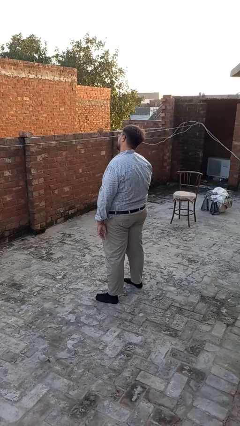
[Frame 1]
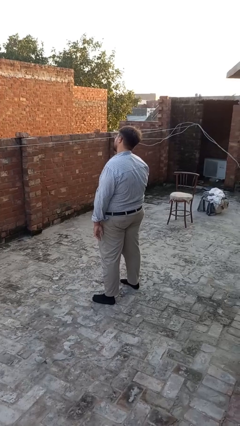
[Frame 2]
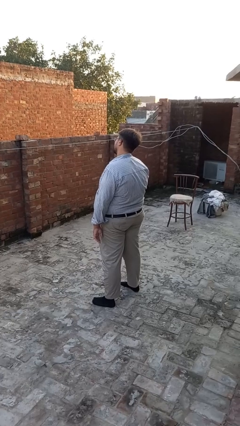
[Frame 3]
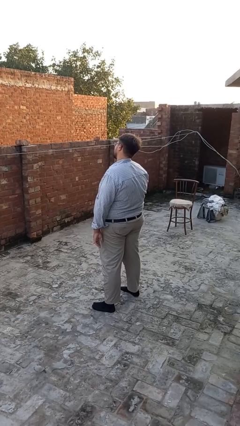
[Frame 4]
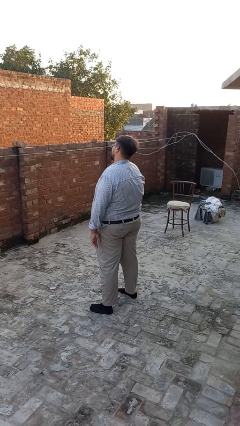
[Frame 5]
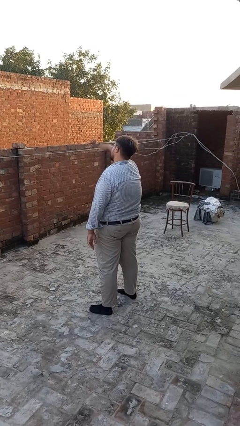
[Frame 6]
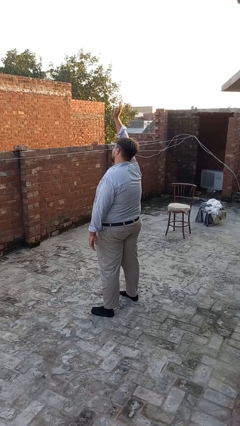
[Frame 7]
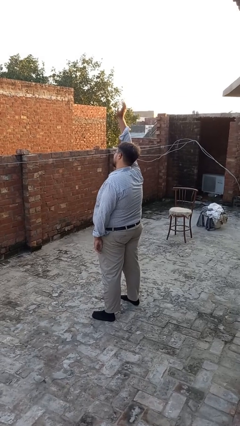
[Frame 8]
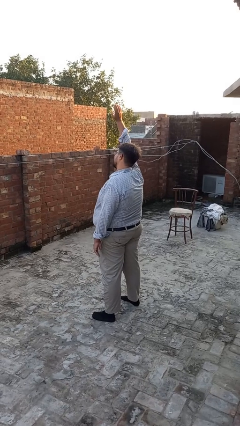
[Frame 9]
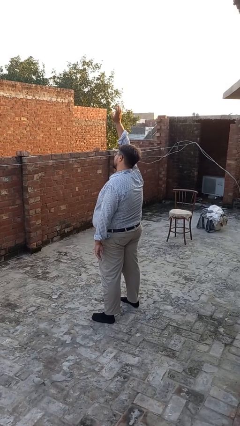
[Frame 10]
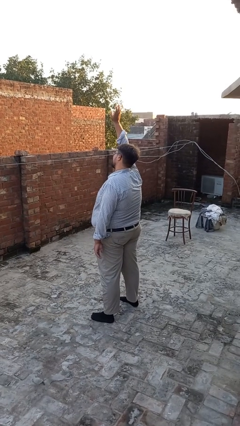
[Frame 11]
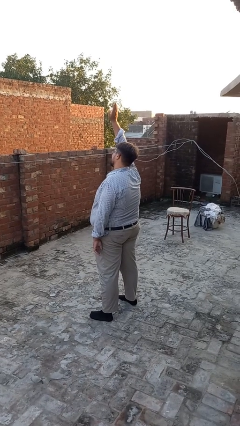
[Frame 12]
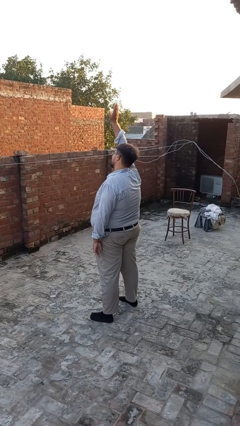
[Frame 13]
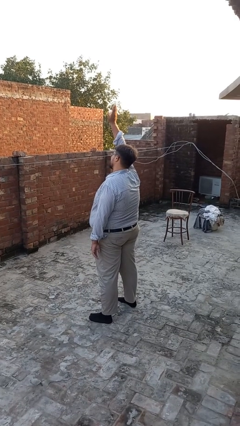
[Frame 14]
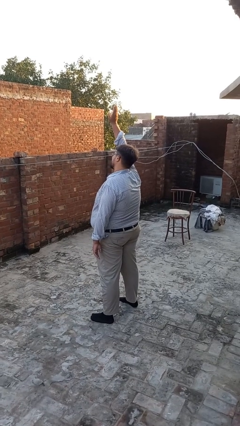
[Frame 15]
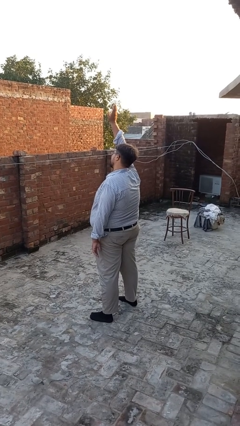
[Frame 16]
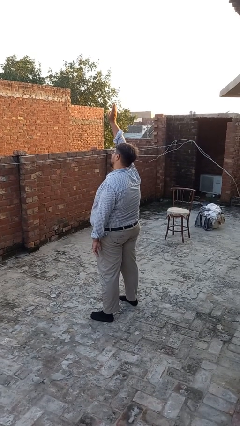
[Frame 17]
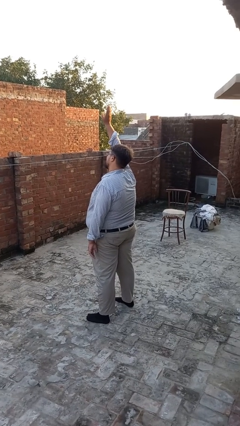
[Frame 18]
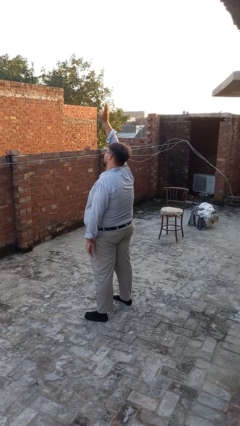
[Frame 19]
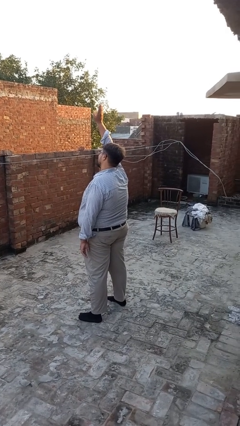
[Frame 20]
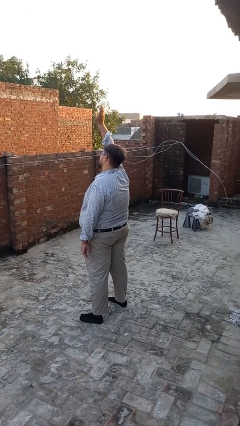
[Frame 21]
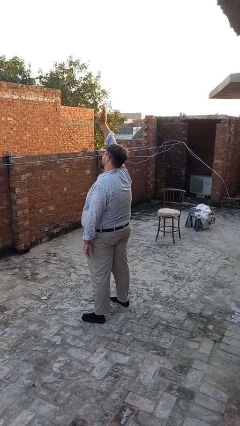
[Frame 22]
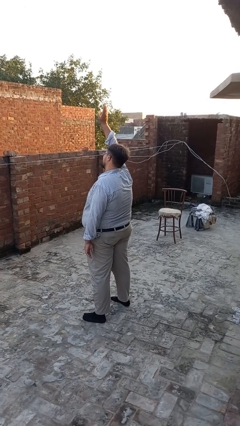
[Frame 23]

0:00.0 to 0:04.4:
person gestures raise hand

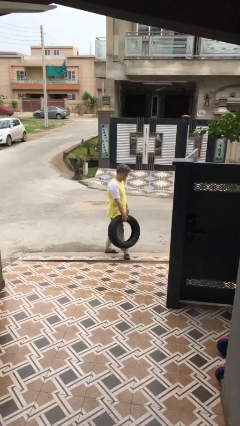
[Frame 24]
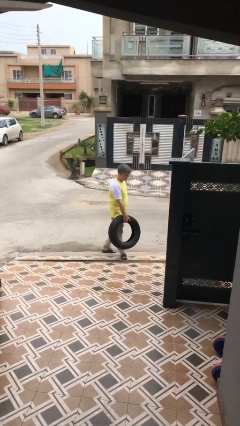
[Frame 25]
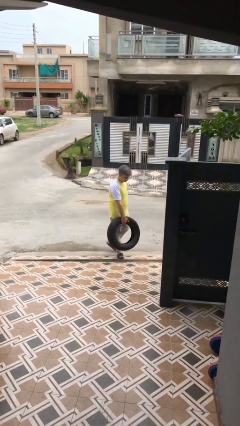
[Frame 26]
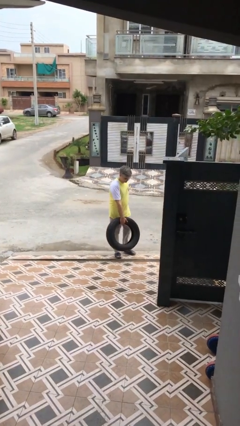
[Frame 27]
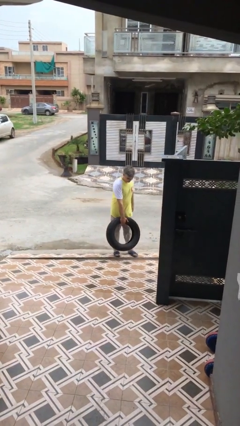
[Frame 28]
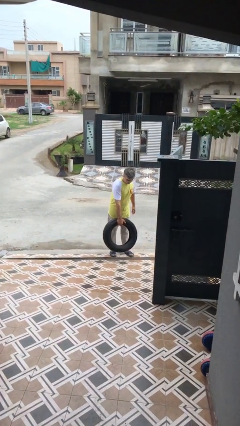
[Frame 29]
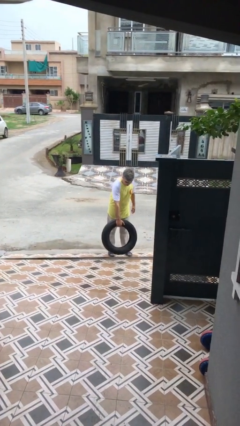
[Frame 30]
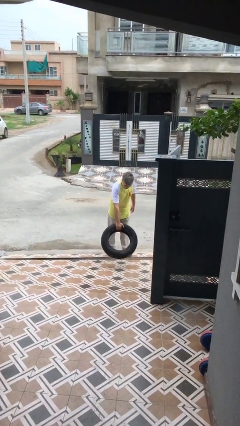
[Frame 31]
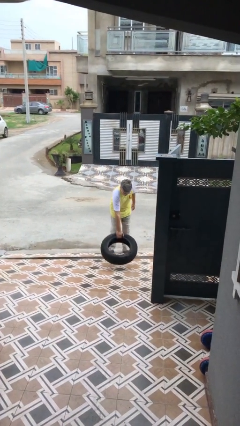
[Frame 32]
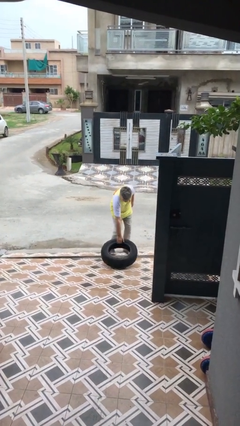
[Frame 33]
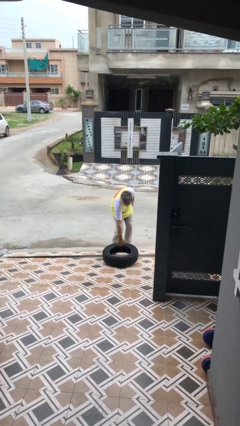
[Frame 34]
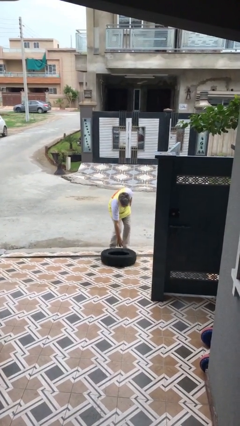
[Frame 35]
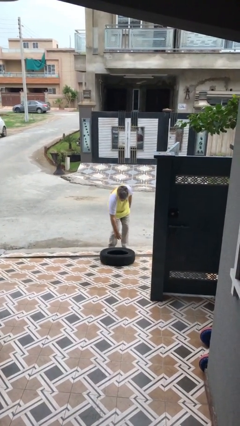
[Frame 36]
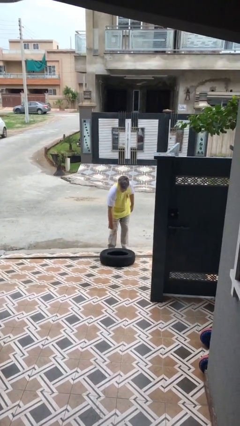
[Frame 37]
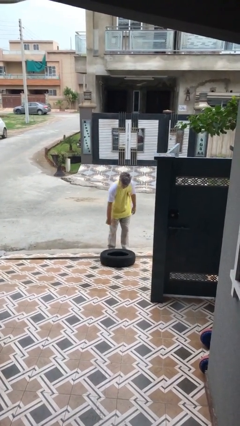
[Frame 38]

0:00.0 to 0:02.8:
person puts down object on floor

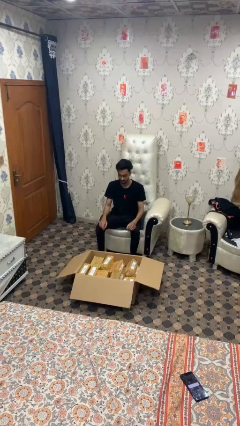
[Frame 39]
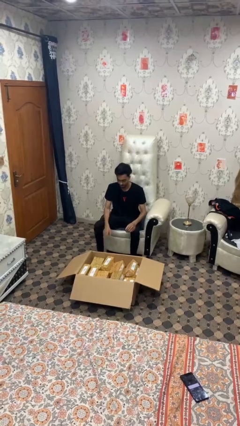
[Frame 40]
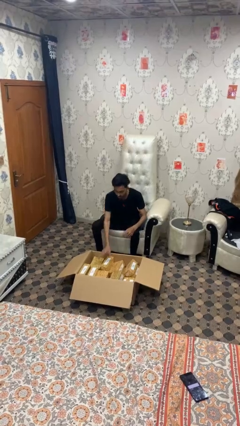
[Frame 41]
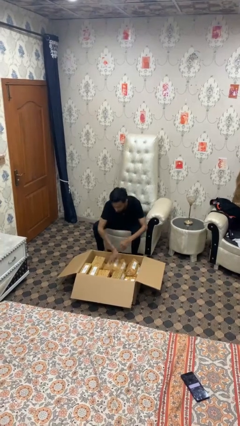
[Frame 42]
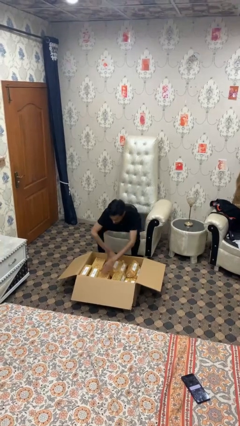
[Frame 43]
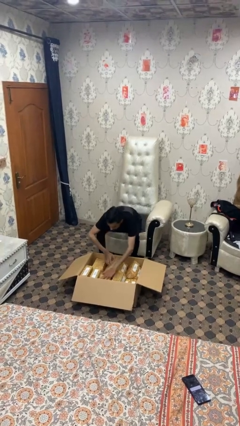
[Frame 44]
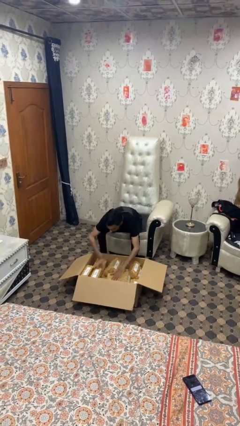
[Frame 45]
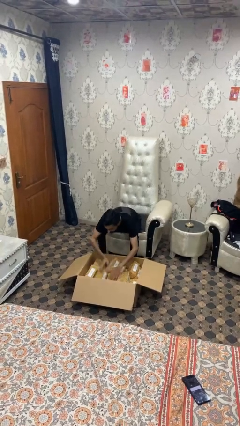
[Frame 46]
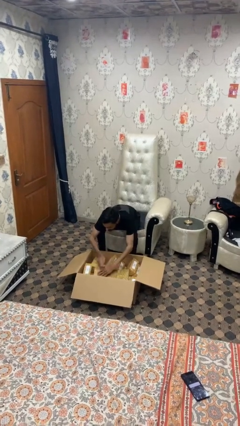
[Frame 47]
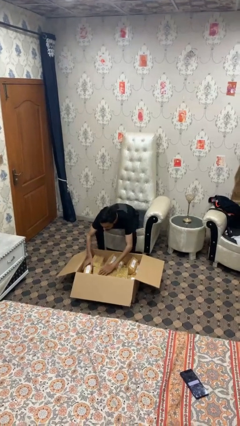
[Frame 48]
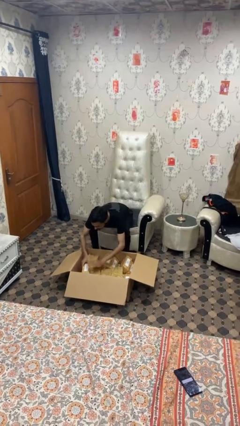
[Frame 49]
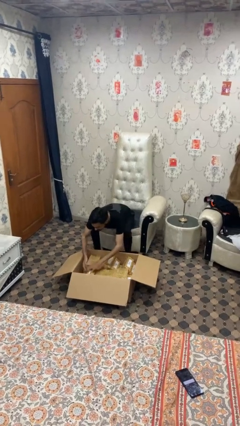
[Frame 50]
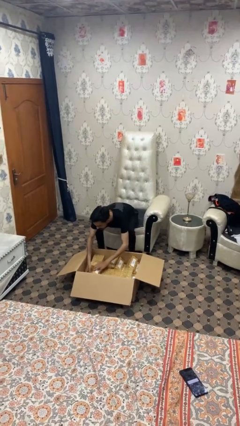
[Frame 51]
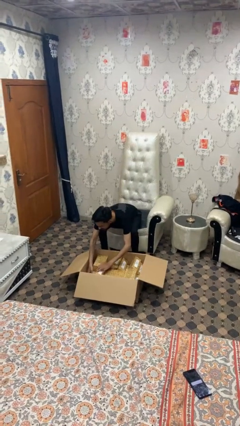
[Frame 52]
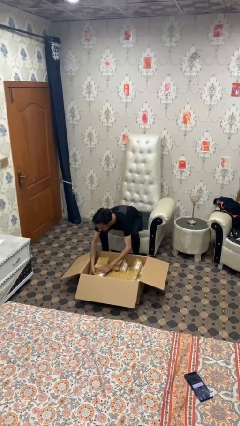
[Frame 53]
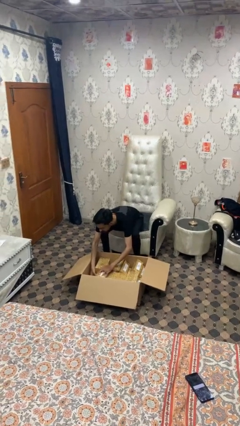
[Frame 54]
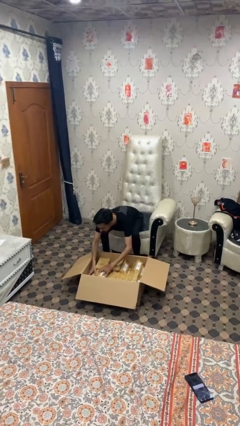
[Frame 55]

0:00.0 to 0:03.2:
person searches in box

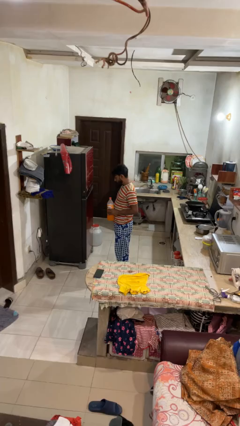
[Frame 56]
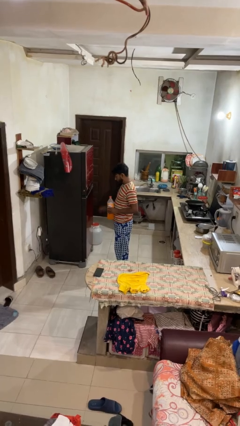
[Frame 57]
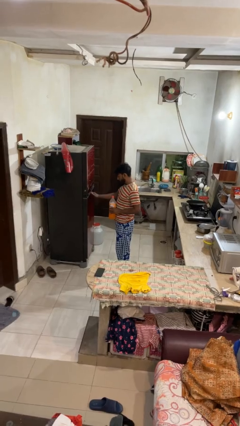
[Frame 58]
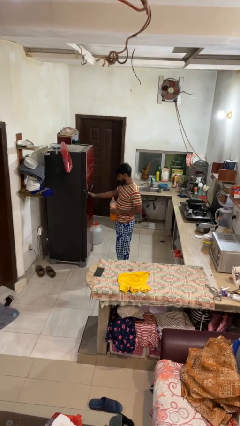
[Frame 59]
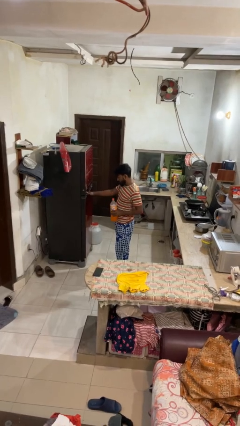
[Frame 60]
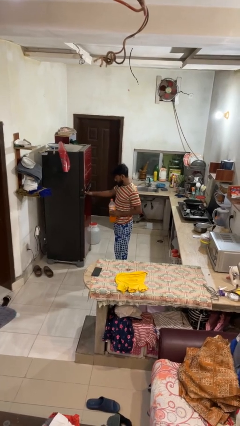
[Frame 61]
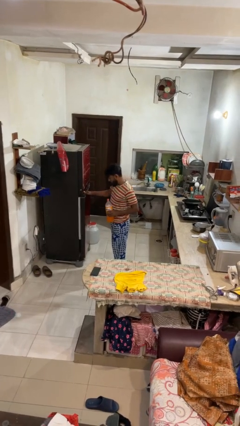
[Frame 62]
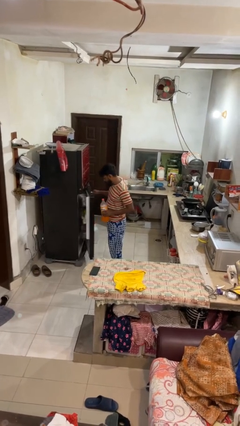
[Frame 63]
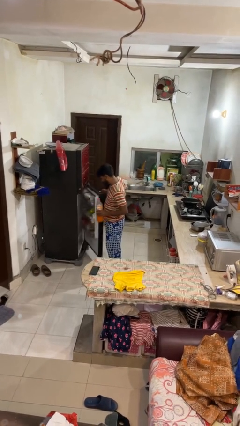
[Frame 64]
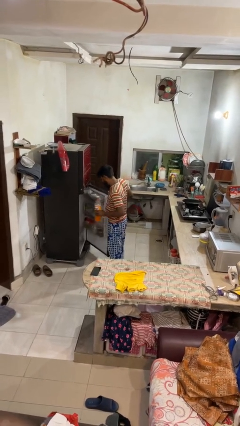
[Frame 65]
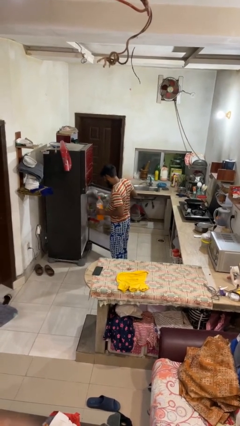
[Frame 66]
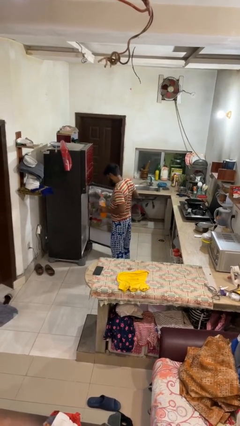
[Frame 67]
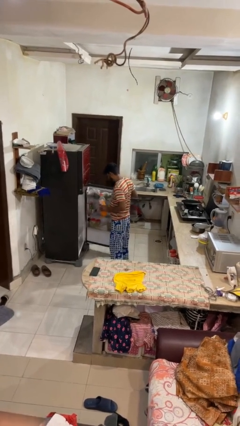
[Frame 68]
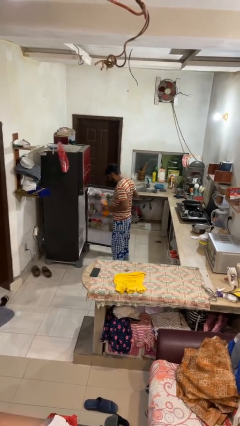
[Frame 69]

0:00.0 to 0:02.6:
person opens refrigerator

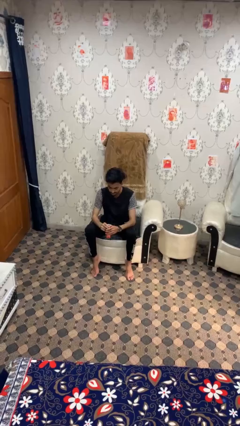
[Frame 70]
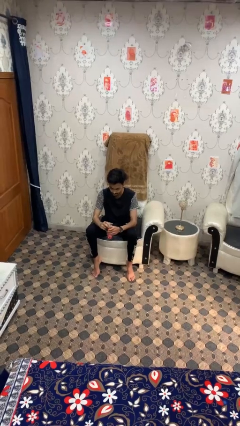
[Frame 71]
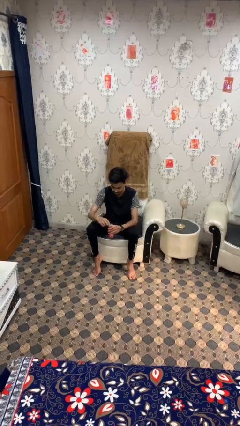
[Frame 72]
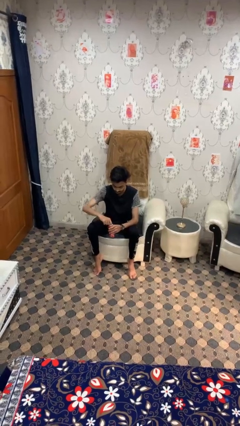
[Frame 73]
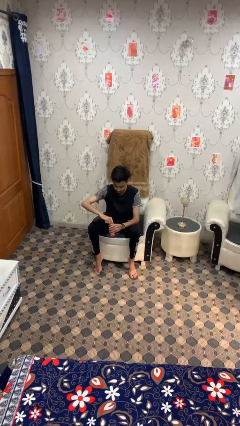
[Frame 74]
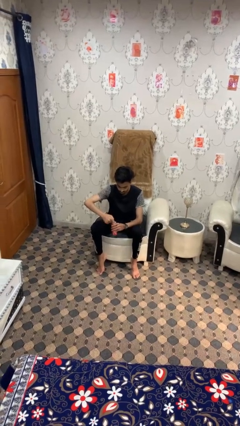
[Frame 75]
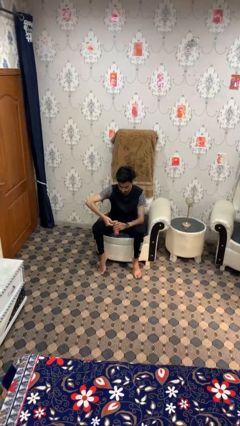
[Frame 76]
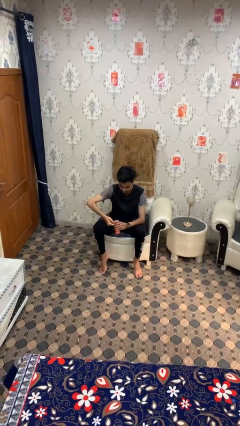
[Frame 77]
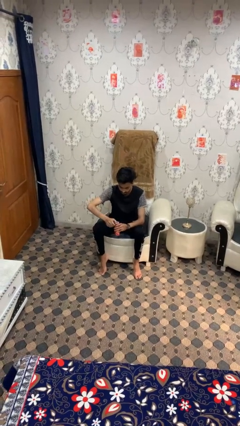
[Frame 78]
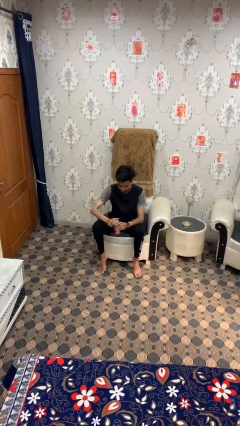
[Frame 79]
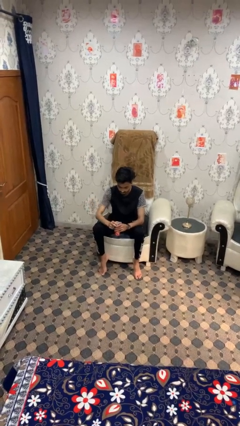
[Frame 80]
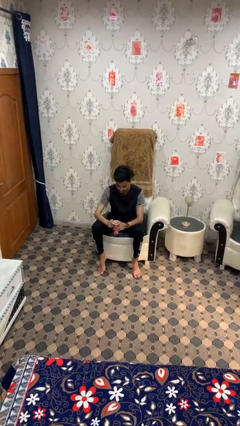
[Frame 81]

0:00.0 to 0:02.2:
person opens beverage can

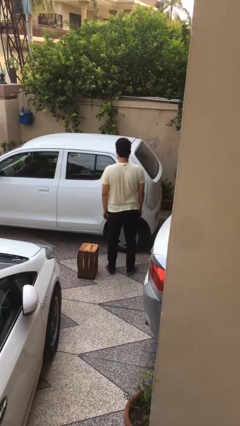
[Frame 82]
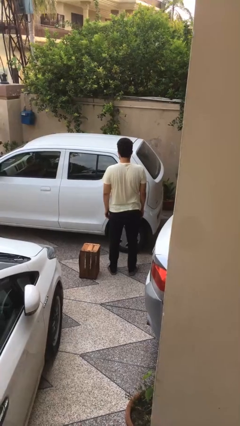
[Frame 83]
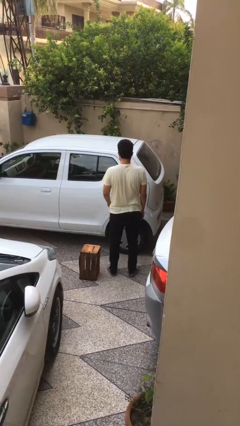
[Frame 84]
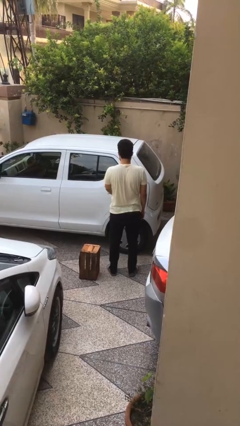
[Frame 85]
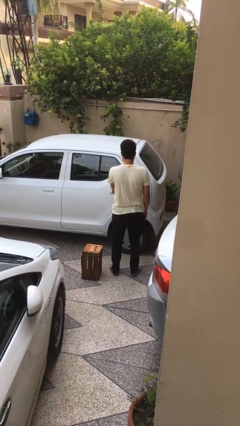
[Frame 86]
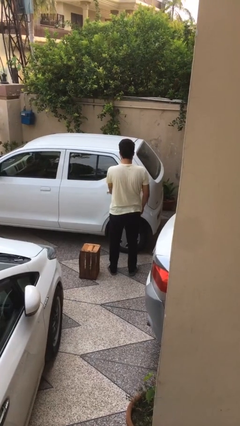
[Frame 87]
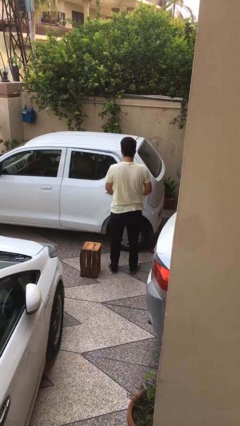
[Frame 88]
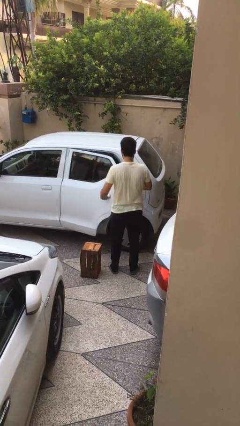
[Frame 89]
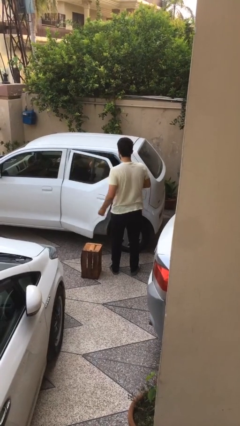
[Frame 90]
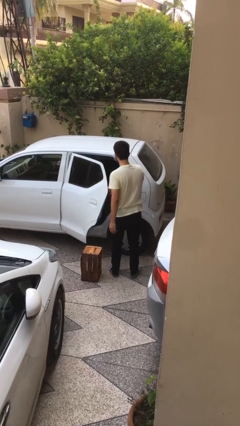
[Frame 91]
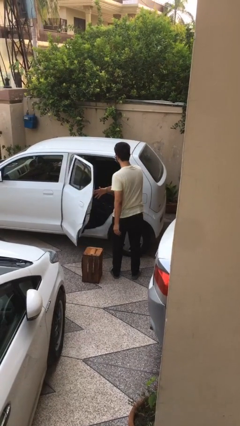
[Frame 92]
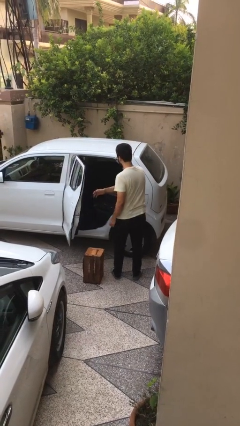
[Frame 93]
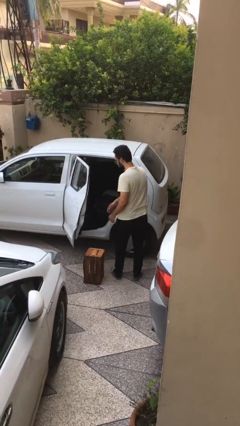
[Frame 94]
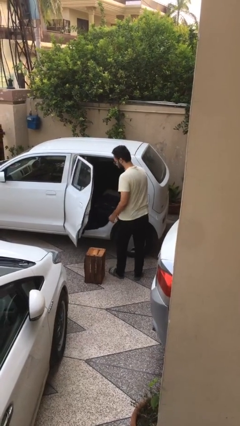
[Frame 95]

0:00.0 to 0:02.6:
person opens car door
